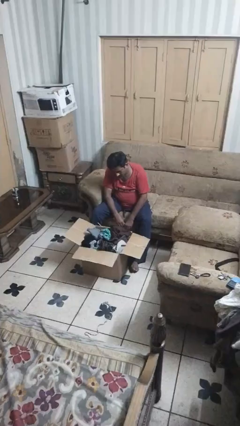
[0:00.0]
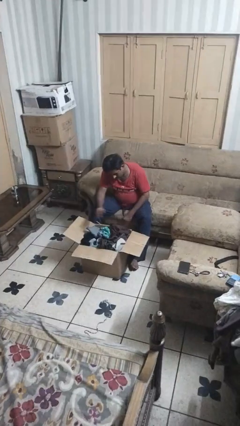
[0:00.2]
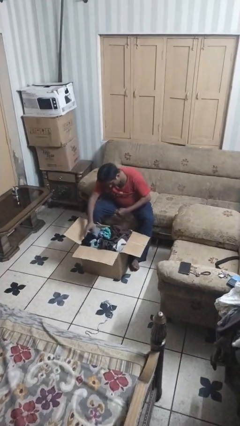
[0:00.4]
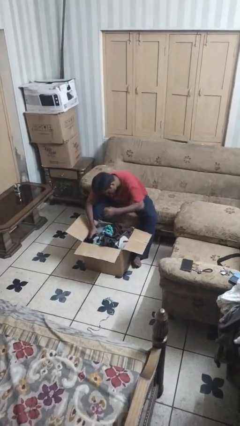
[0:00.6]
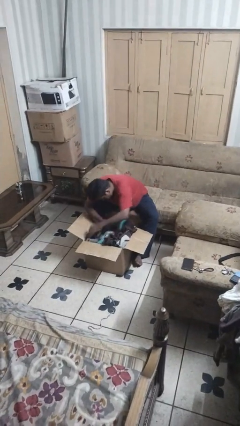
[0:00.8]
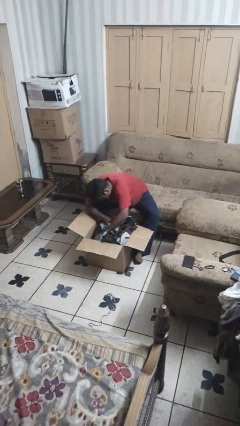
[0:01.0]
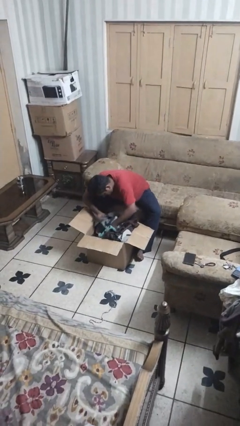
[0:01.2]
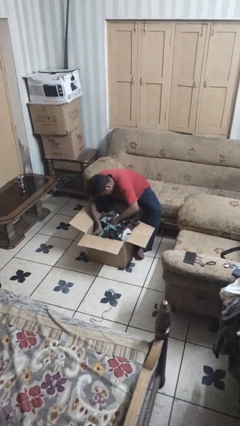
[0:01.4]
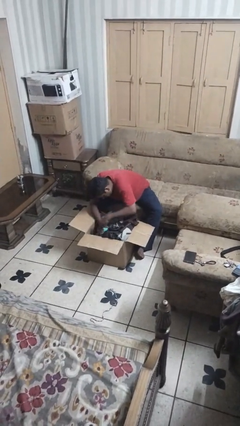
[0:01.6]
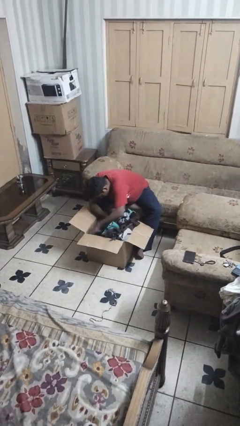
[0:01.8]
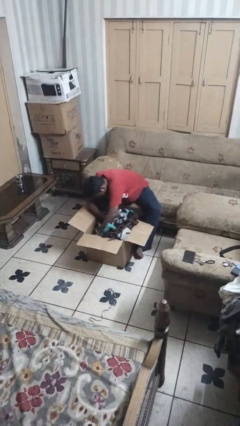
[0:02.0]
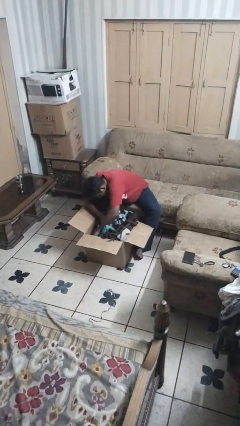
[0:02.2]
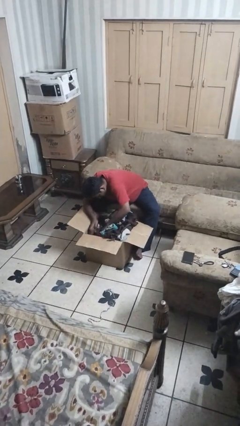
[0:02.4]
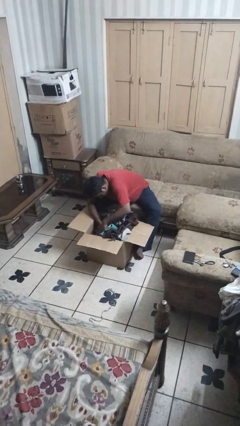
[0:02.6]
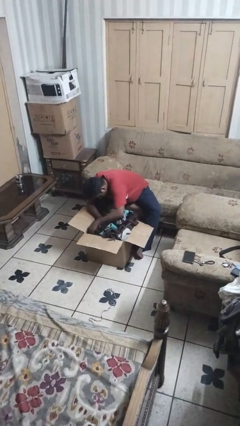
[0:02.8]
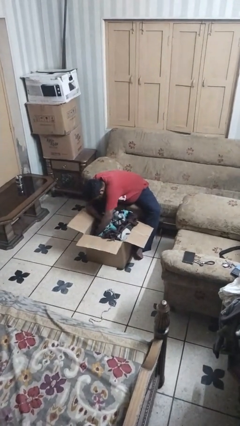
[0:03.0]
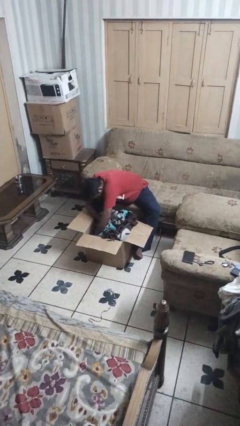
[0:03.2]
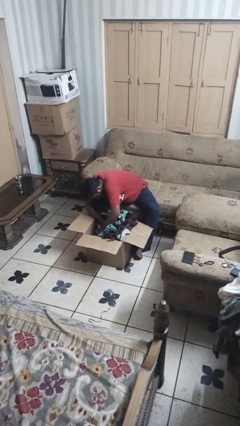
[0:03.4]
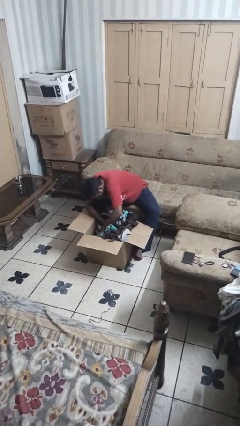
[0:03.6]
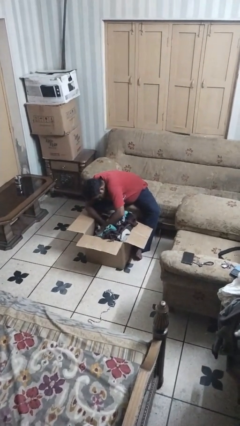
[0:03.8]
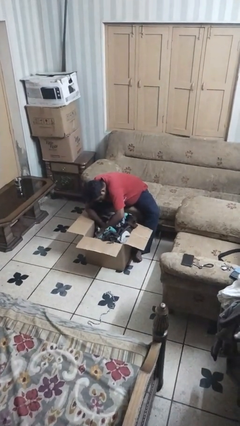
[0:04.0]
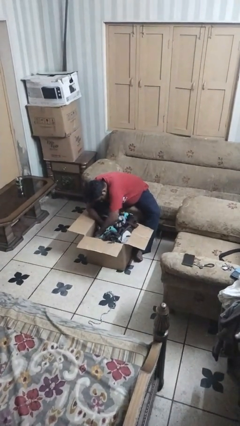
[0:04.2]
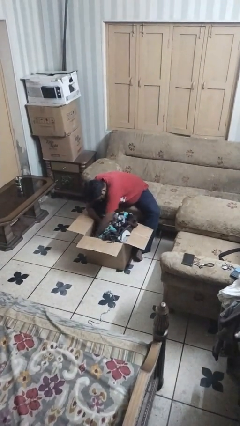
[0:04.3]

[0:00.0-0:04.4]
person searches in box

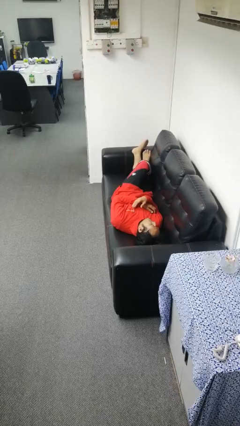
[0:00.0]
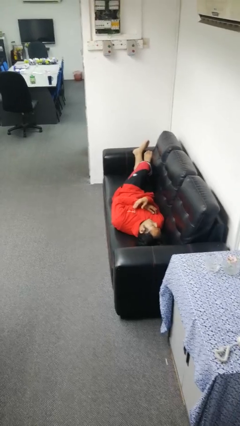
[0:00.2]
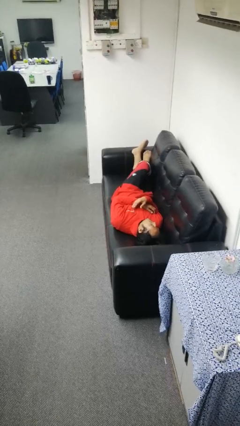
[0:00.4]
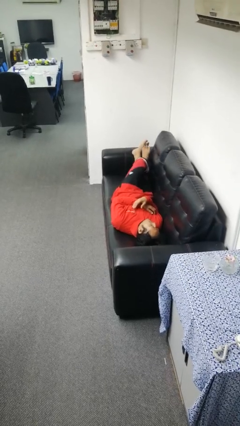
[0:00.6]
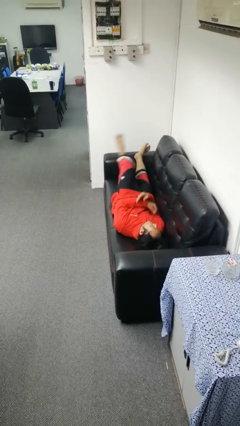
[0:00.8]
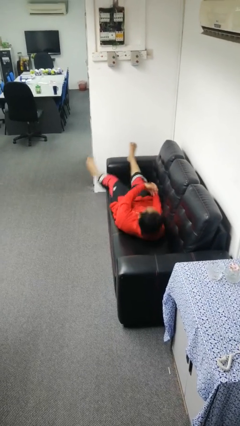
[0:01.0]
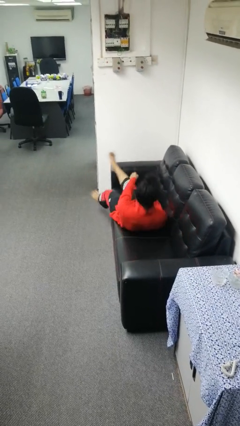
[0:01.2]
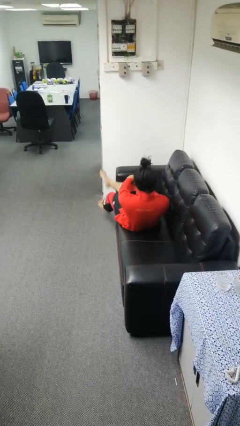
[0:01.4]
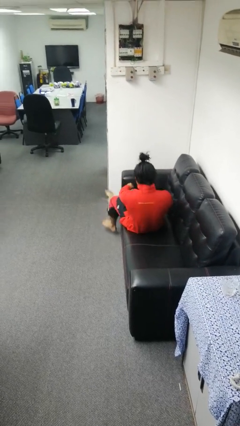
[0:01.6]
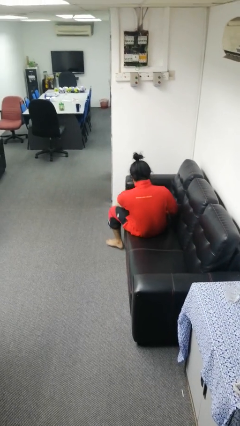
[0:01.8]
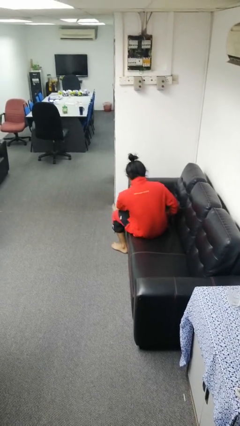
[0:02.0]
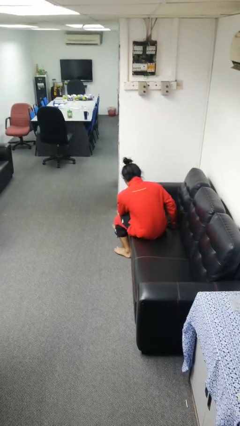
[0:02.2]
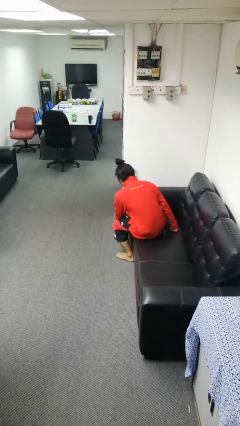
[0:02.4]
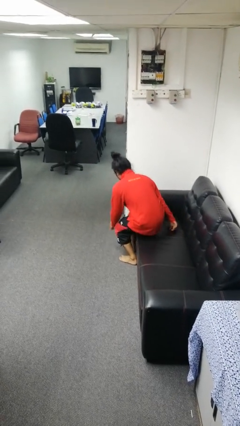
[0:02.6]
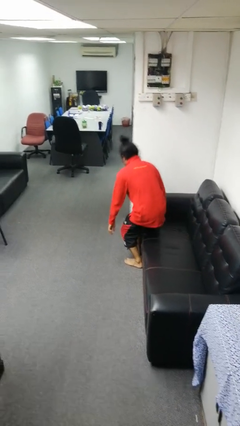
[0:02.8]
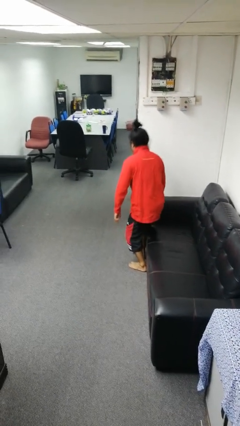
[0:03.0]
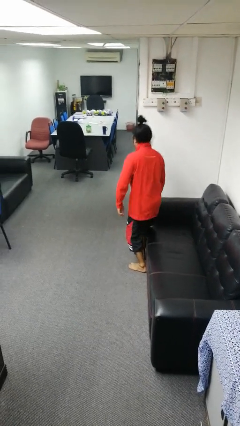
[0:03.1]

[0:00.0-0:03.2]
person stands up

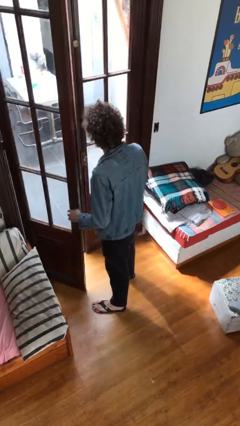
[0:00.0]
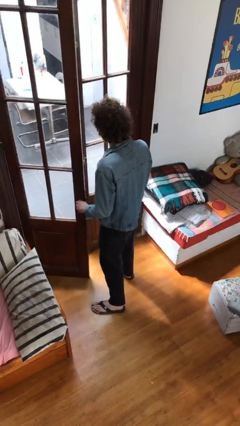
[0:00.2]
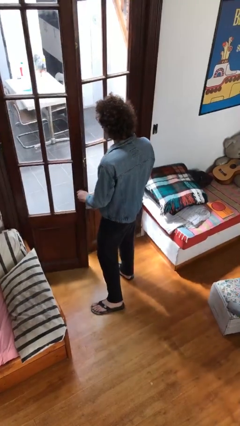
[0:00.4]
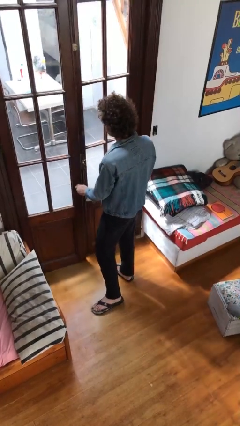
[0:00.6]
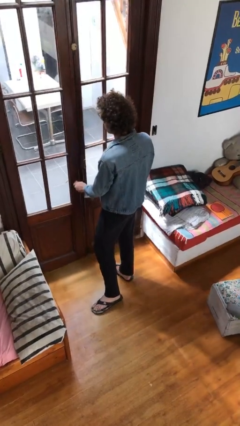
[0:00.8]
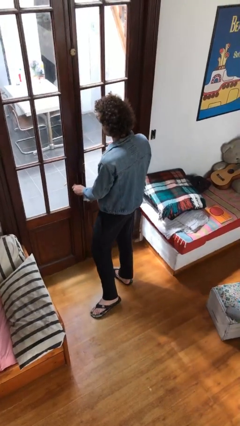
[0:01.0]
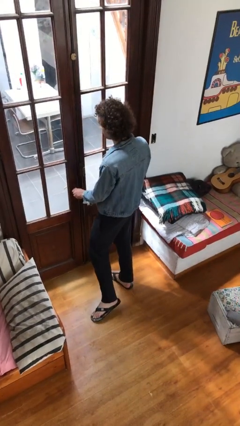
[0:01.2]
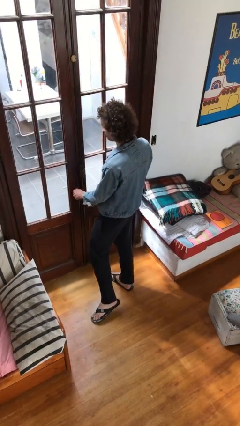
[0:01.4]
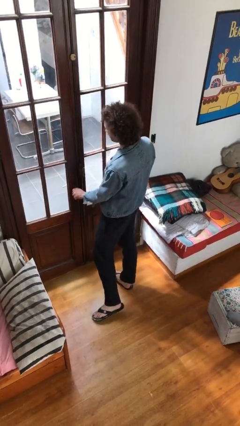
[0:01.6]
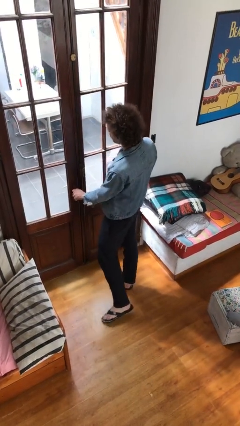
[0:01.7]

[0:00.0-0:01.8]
person closes facility door

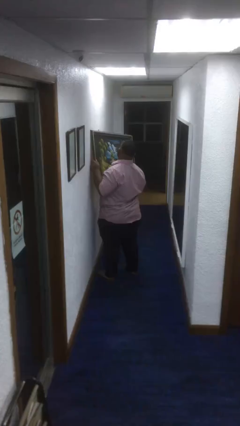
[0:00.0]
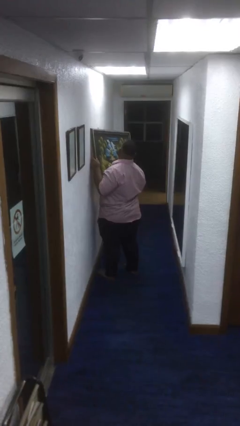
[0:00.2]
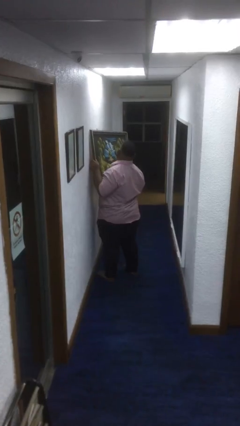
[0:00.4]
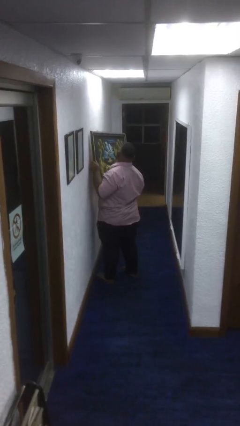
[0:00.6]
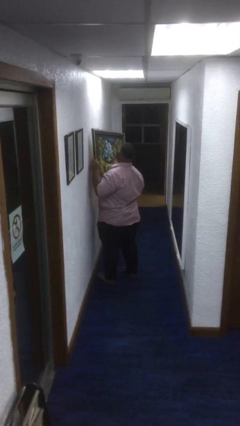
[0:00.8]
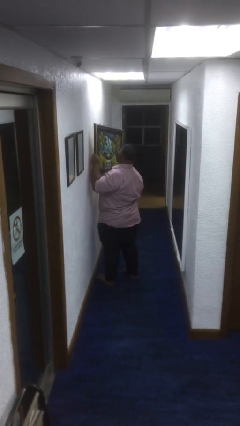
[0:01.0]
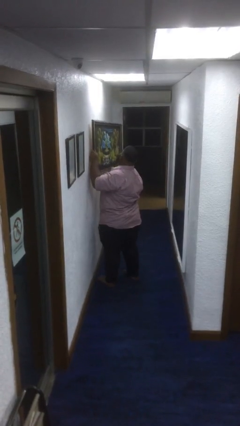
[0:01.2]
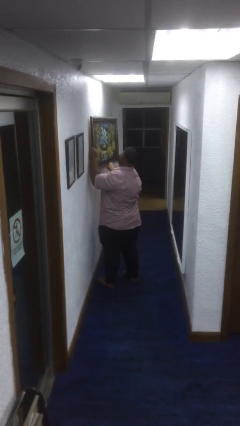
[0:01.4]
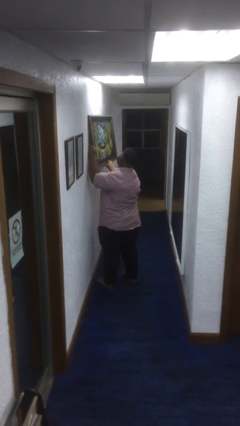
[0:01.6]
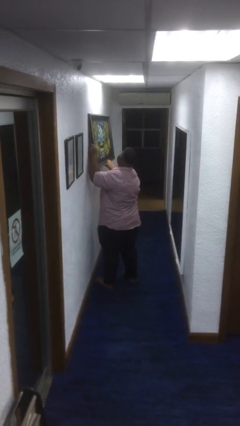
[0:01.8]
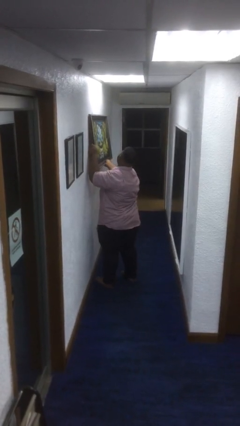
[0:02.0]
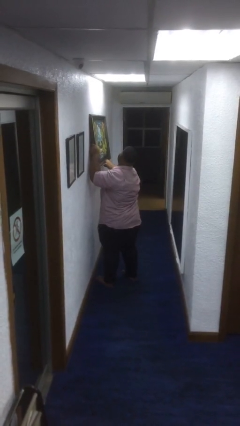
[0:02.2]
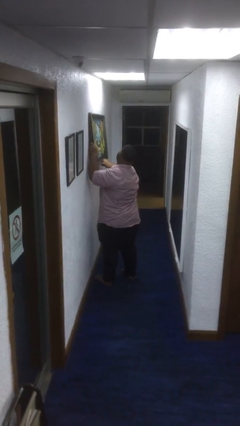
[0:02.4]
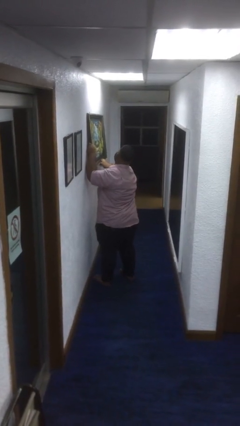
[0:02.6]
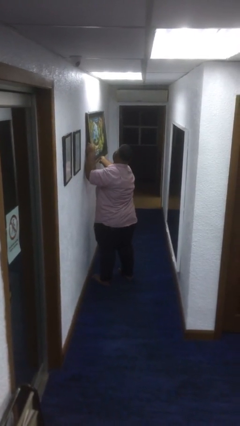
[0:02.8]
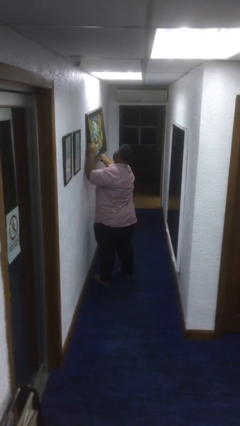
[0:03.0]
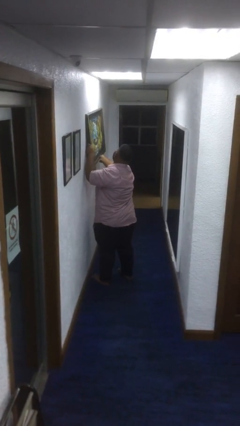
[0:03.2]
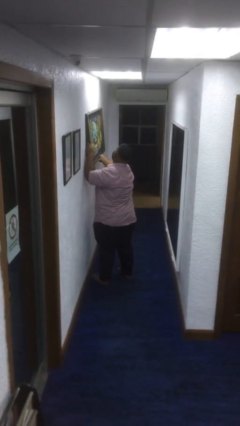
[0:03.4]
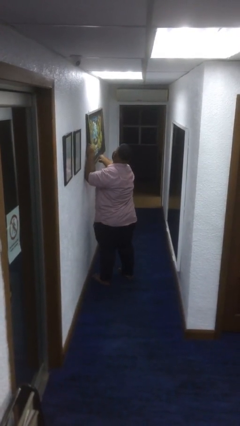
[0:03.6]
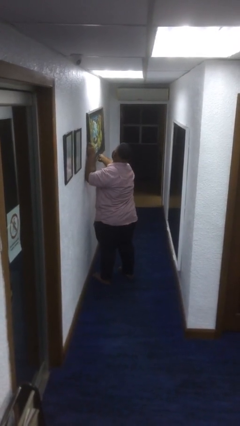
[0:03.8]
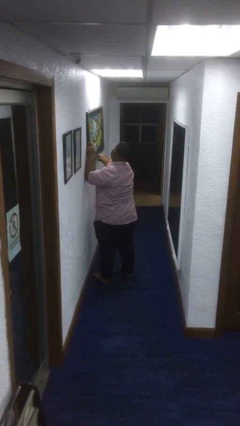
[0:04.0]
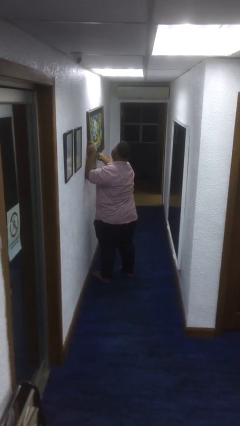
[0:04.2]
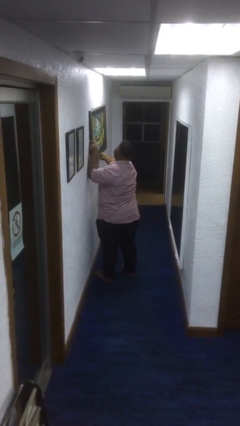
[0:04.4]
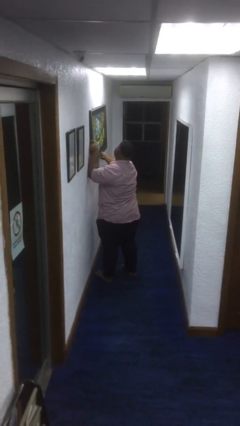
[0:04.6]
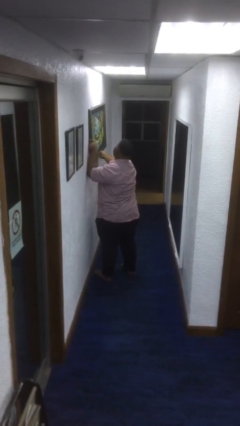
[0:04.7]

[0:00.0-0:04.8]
person puts up picture frame

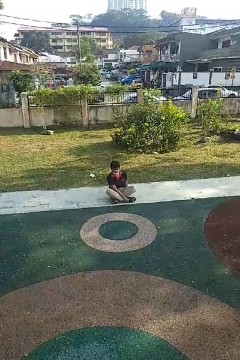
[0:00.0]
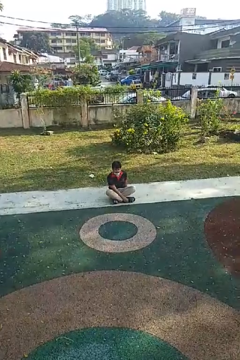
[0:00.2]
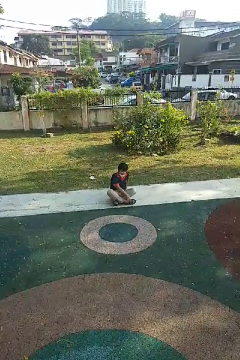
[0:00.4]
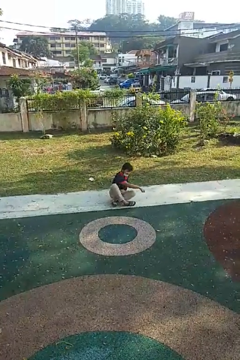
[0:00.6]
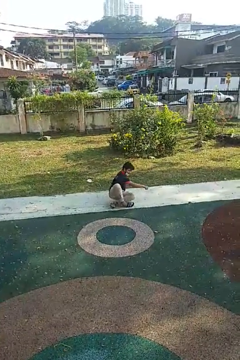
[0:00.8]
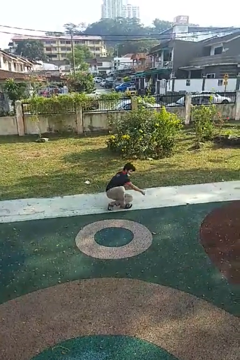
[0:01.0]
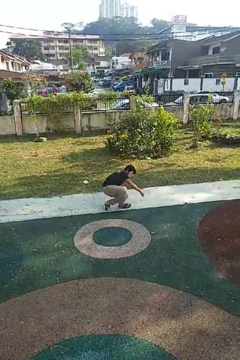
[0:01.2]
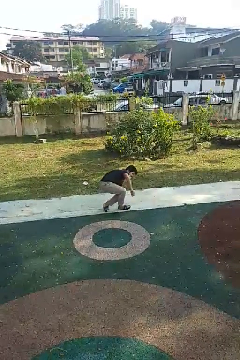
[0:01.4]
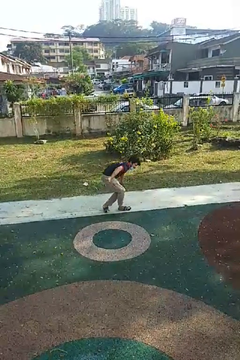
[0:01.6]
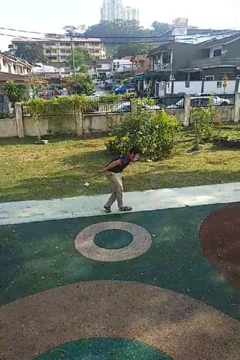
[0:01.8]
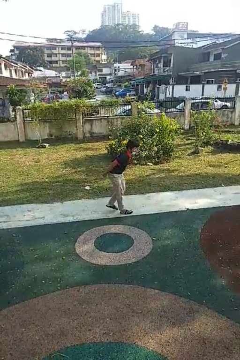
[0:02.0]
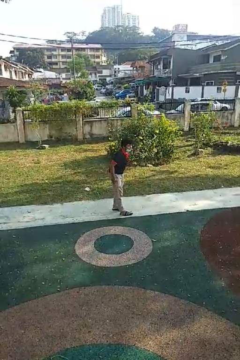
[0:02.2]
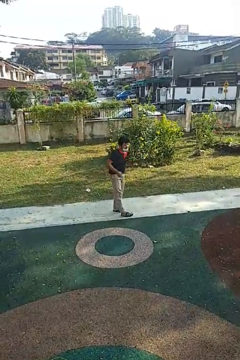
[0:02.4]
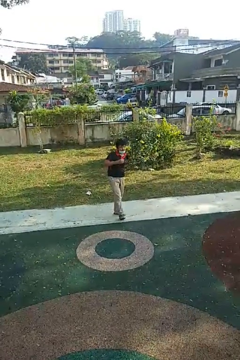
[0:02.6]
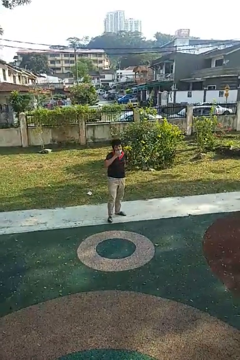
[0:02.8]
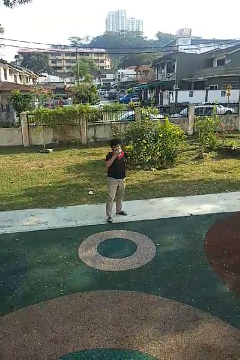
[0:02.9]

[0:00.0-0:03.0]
person stands up from floor

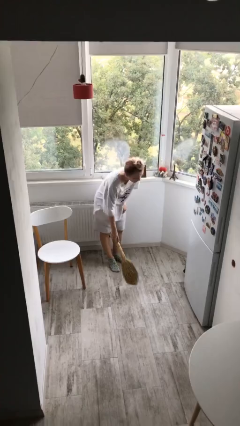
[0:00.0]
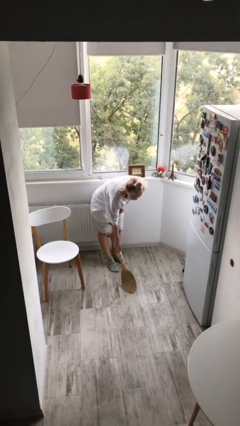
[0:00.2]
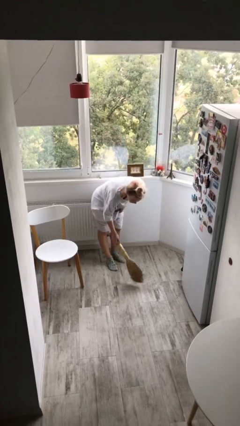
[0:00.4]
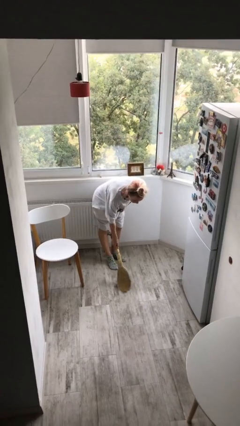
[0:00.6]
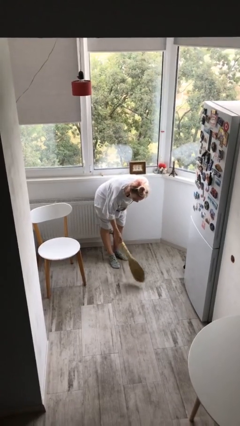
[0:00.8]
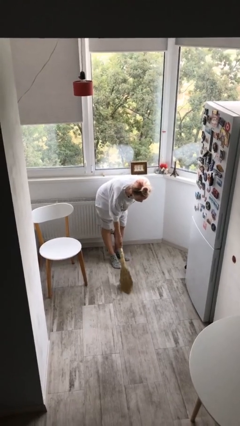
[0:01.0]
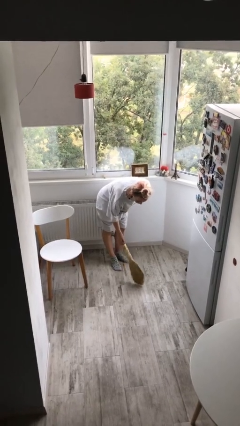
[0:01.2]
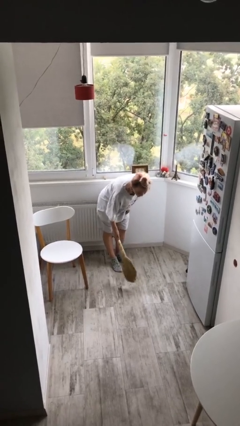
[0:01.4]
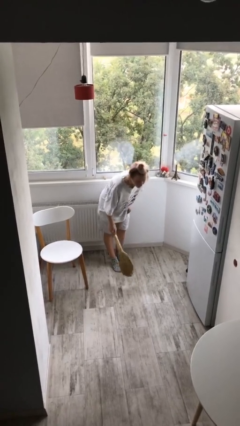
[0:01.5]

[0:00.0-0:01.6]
person sweeps floor
